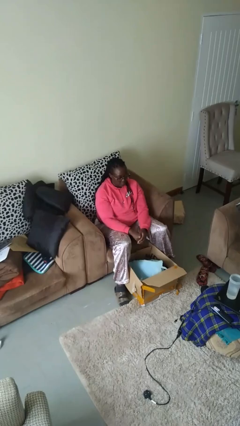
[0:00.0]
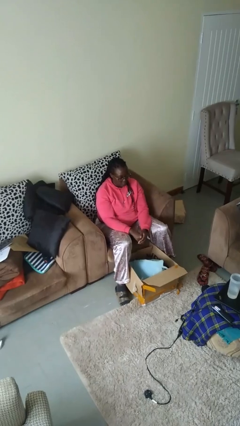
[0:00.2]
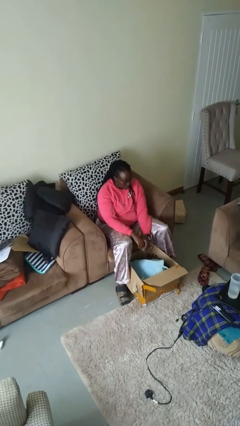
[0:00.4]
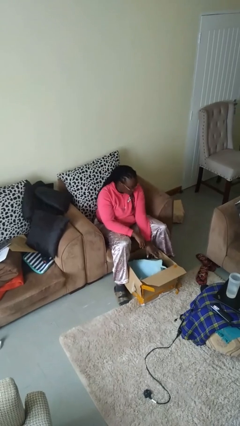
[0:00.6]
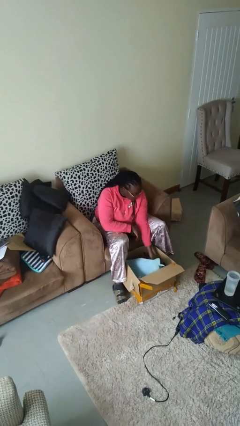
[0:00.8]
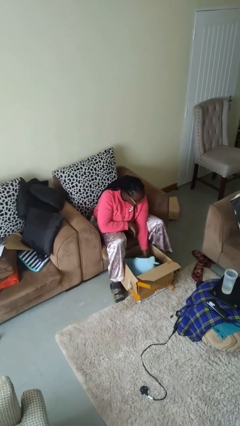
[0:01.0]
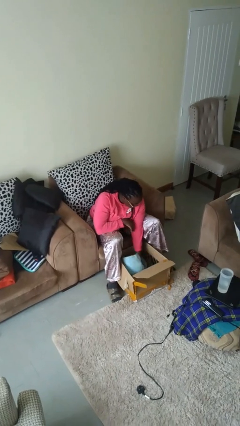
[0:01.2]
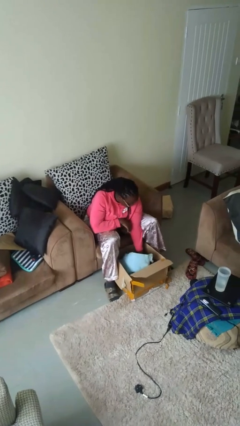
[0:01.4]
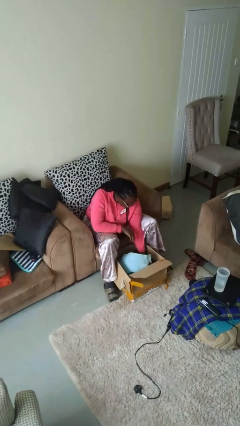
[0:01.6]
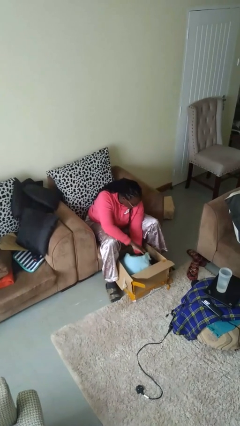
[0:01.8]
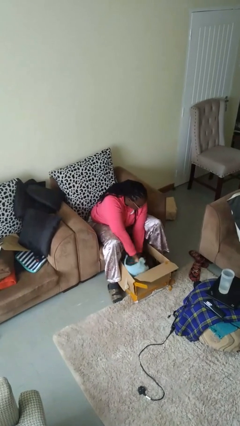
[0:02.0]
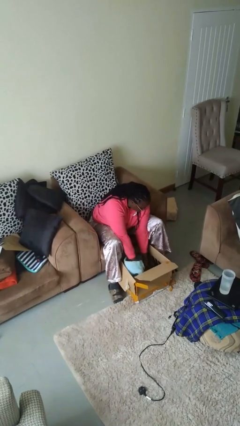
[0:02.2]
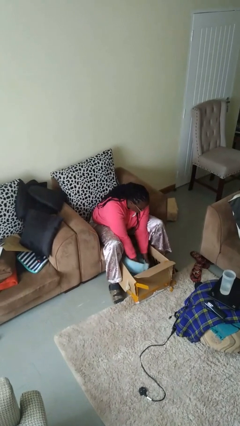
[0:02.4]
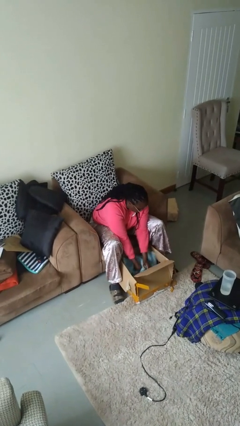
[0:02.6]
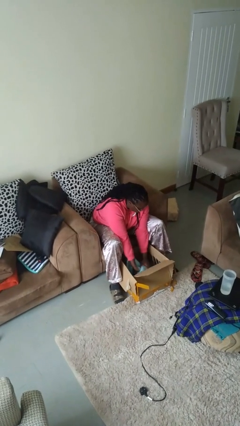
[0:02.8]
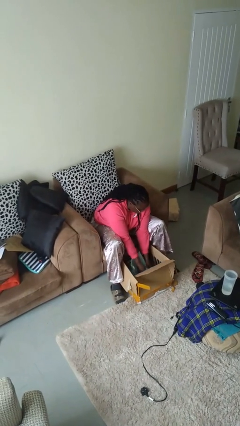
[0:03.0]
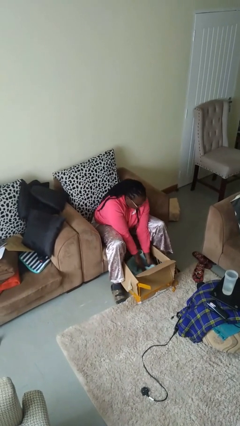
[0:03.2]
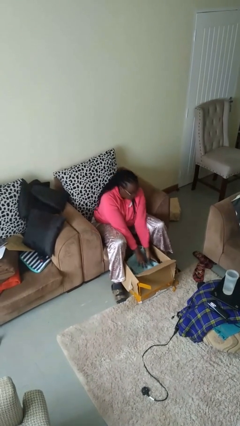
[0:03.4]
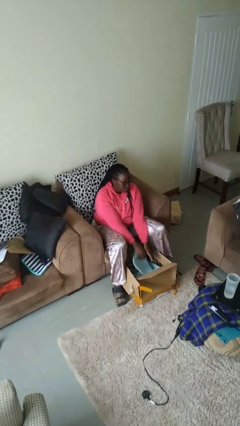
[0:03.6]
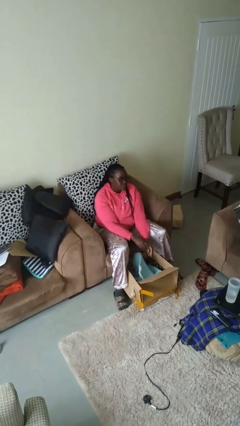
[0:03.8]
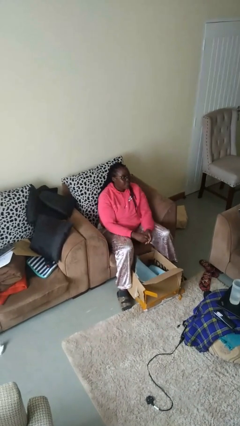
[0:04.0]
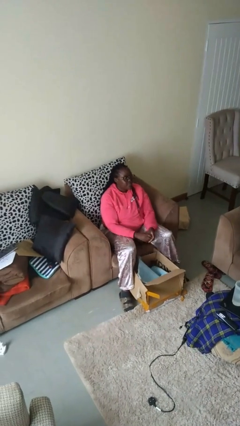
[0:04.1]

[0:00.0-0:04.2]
person searches in box

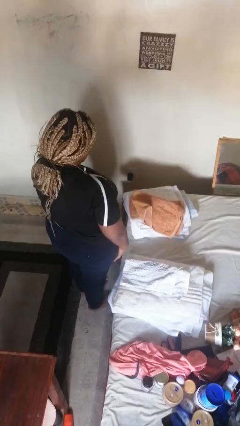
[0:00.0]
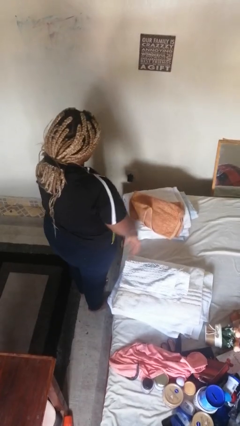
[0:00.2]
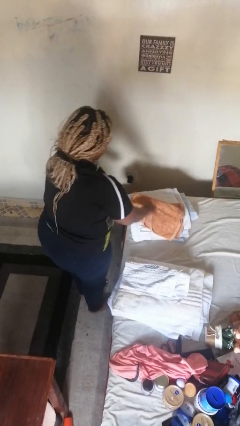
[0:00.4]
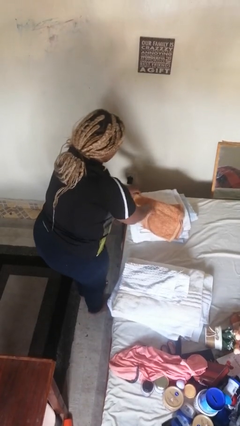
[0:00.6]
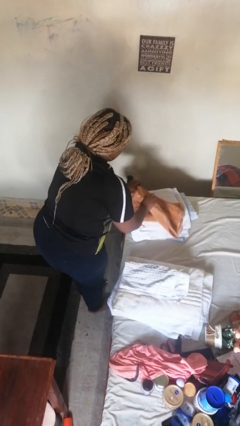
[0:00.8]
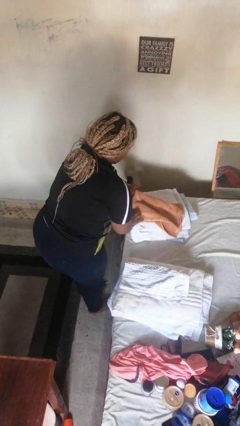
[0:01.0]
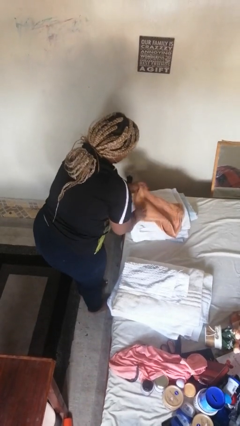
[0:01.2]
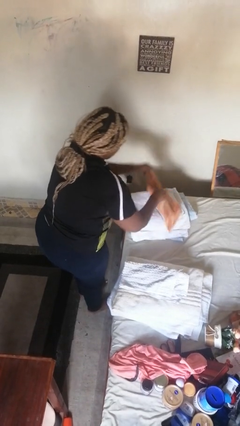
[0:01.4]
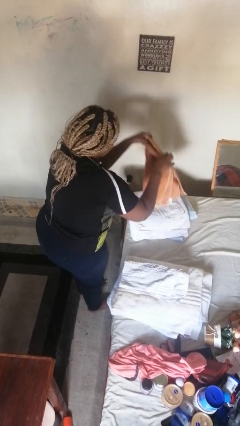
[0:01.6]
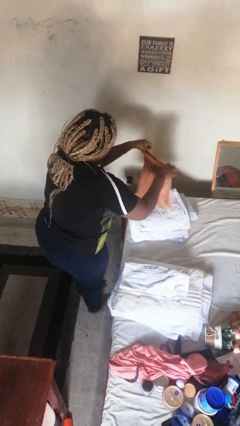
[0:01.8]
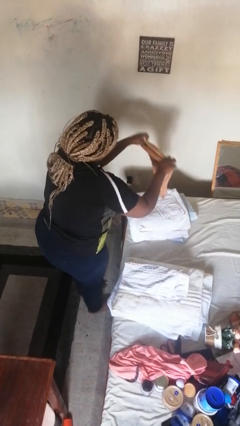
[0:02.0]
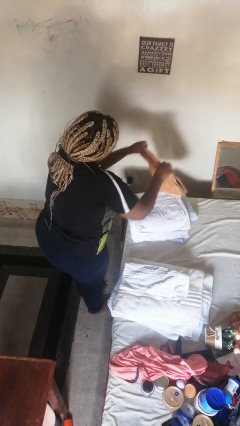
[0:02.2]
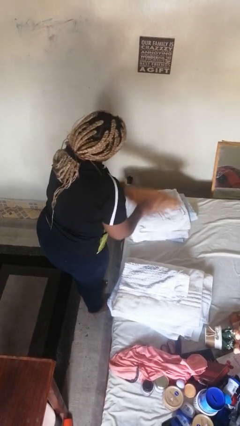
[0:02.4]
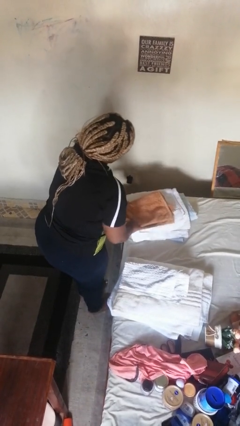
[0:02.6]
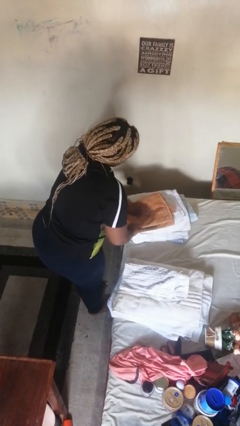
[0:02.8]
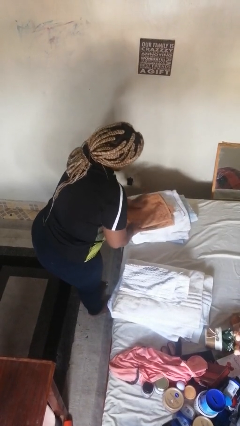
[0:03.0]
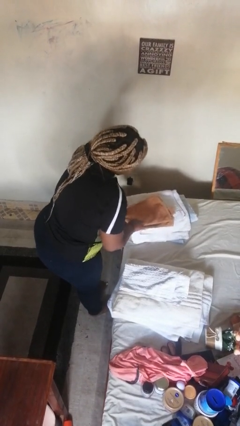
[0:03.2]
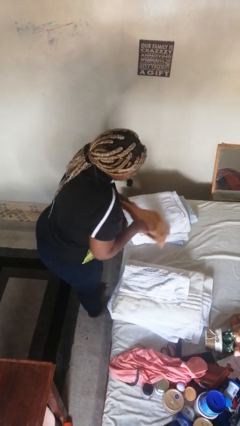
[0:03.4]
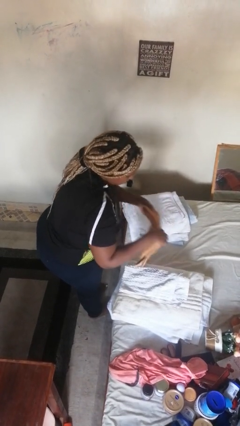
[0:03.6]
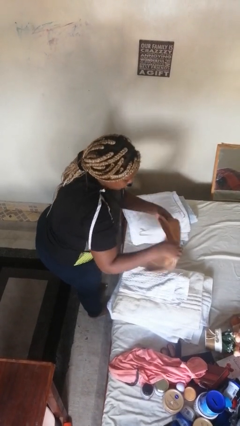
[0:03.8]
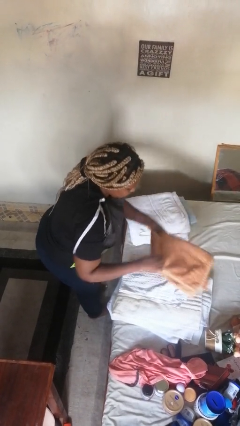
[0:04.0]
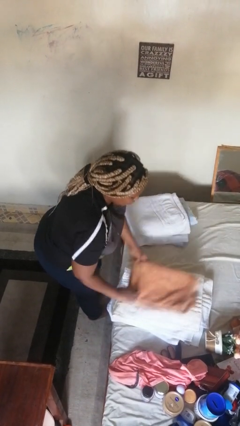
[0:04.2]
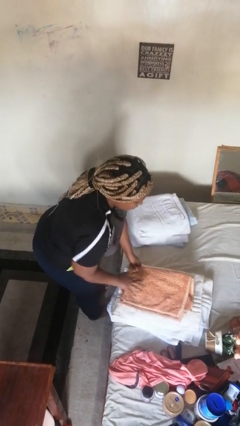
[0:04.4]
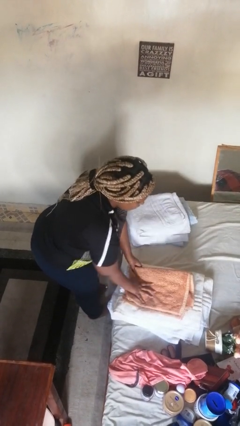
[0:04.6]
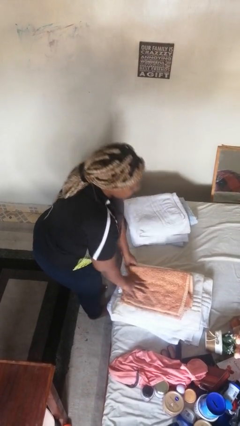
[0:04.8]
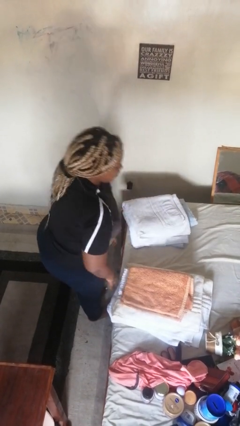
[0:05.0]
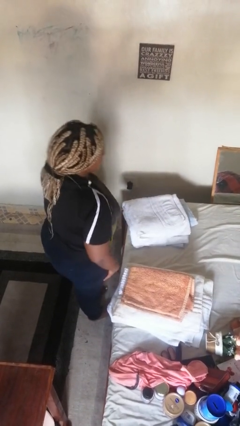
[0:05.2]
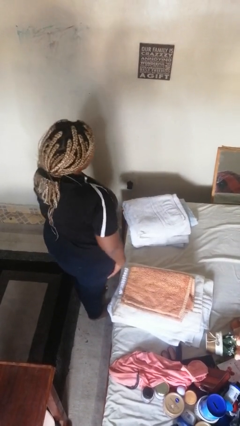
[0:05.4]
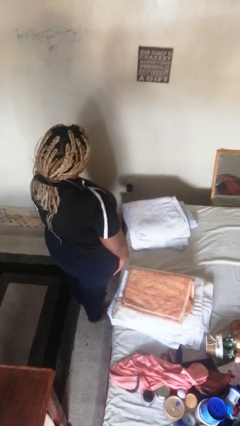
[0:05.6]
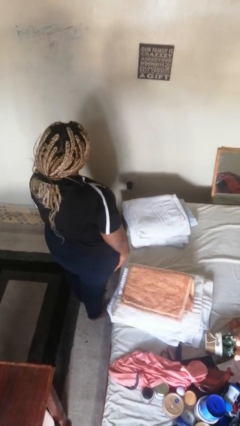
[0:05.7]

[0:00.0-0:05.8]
person folds towel

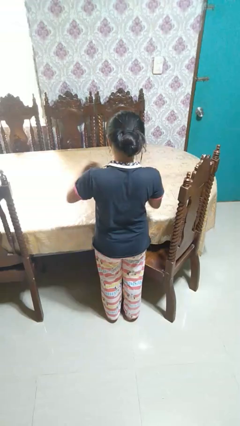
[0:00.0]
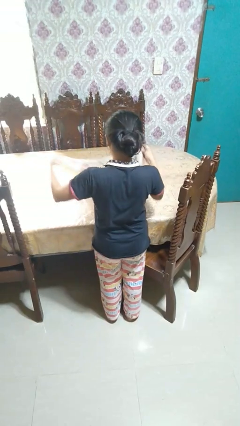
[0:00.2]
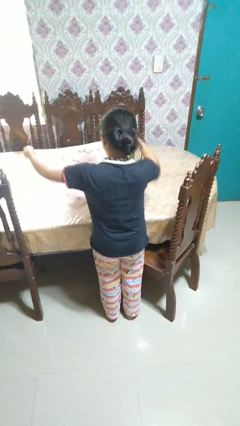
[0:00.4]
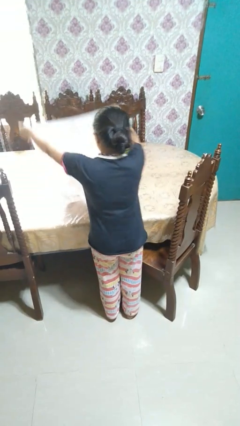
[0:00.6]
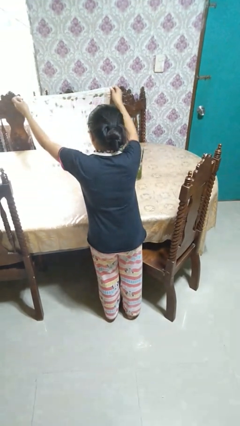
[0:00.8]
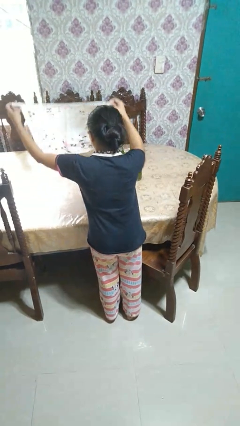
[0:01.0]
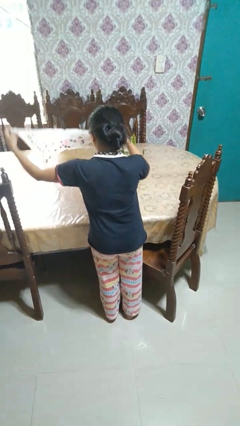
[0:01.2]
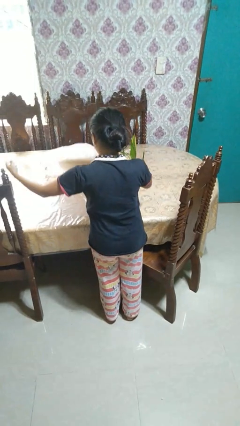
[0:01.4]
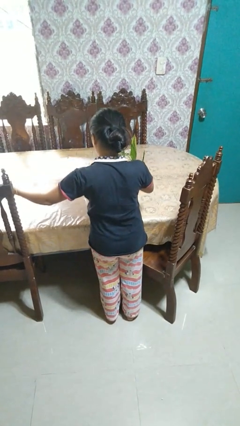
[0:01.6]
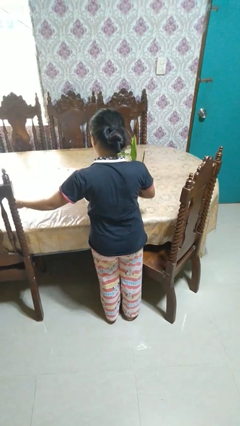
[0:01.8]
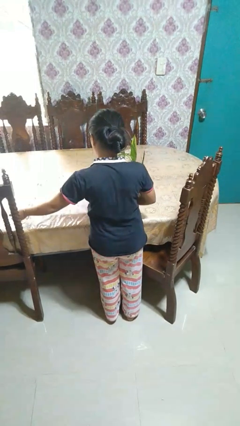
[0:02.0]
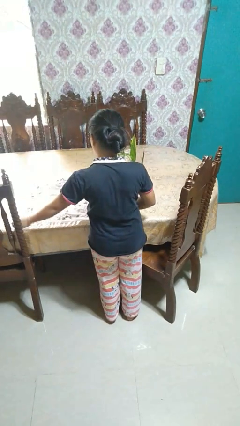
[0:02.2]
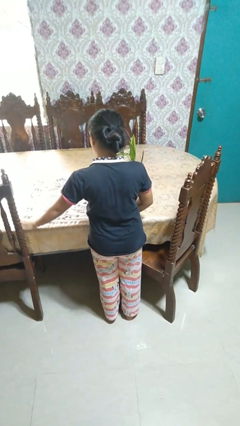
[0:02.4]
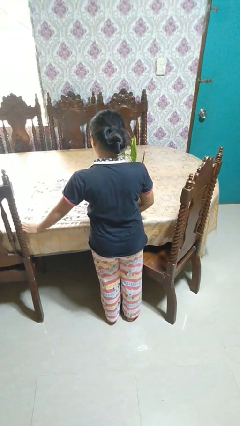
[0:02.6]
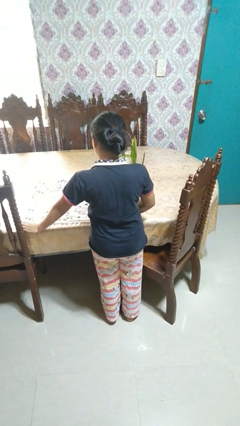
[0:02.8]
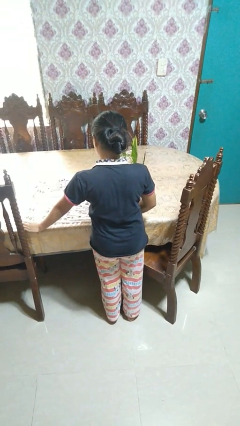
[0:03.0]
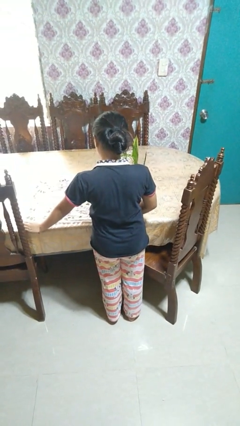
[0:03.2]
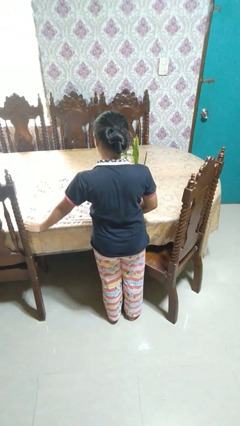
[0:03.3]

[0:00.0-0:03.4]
person spreads tablecloth

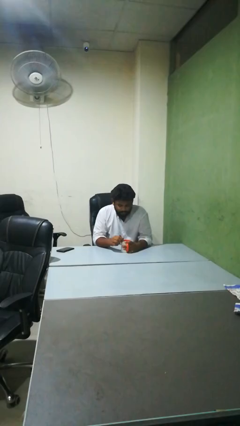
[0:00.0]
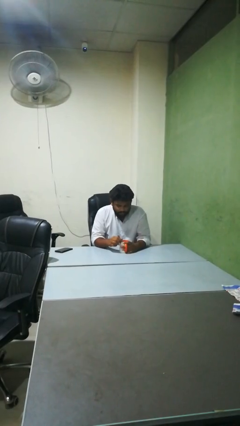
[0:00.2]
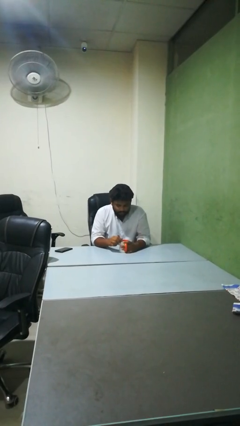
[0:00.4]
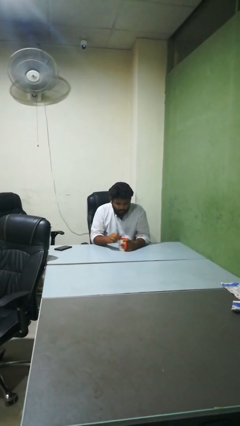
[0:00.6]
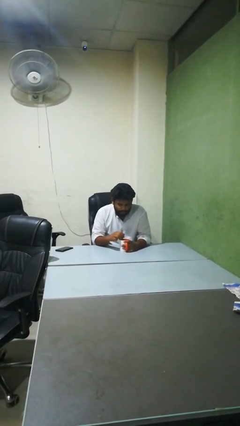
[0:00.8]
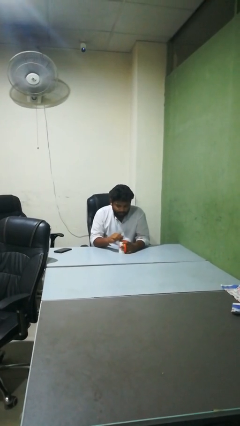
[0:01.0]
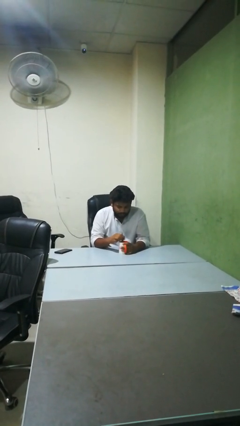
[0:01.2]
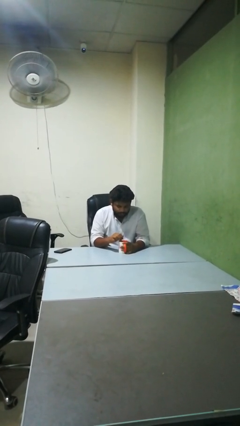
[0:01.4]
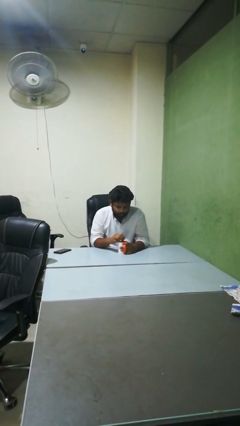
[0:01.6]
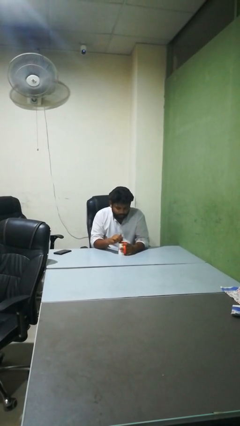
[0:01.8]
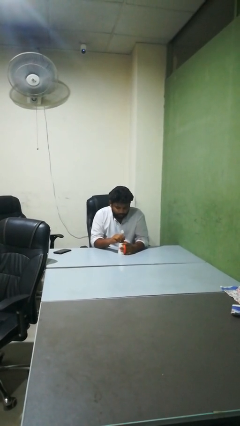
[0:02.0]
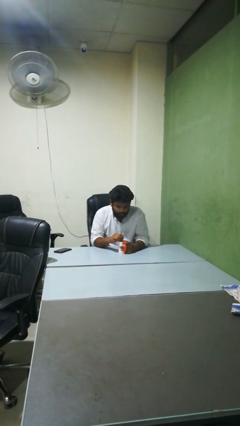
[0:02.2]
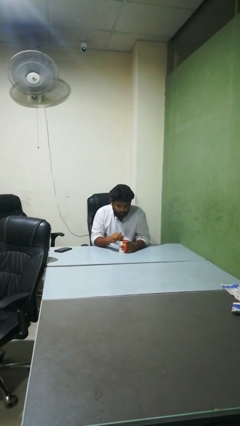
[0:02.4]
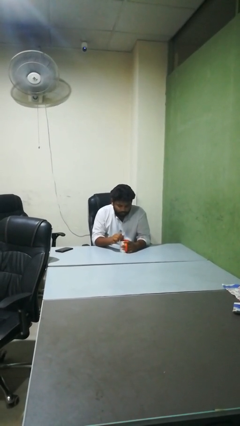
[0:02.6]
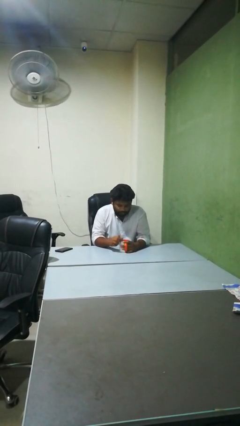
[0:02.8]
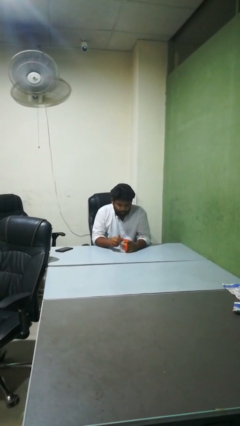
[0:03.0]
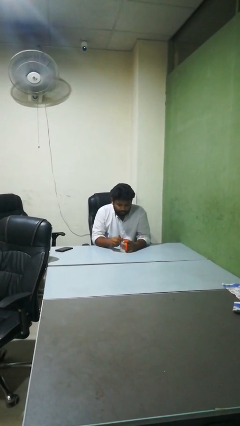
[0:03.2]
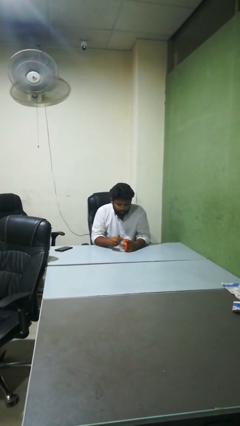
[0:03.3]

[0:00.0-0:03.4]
person stirs mug

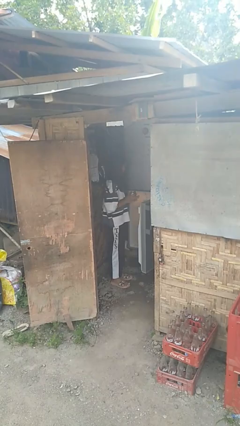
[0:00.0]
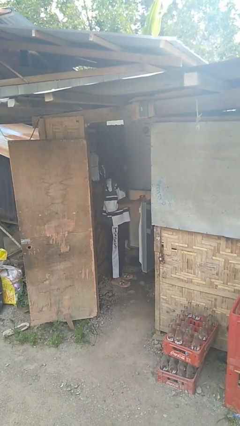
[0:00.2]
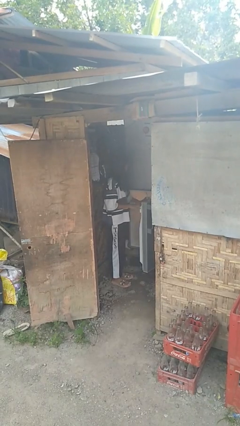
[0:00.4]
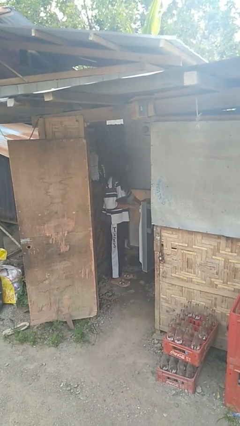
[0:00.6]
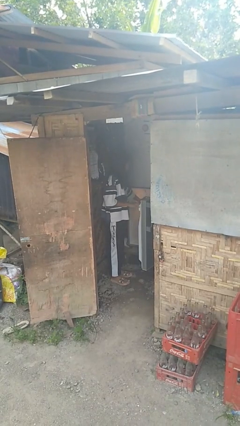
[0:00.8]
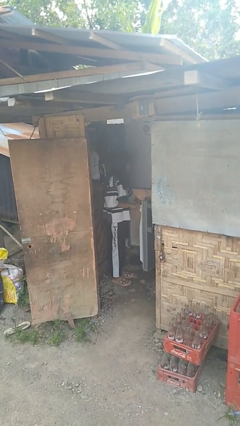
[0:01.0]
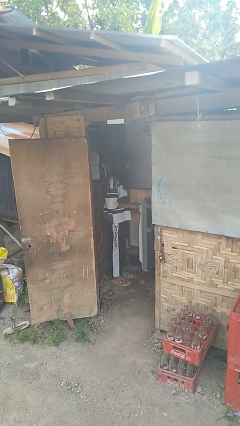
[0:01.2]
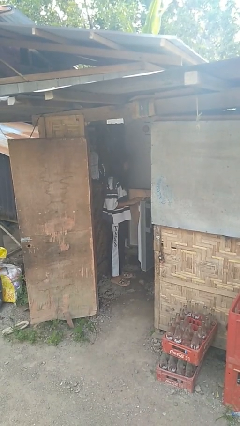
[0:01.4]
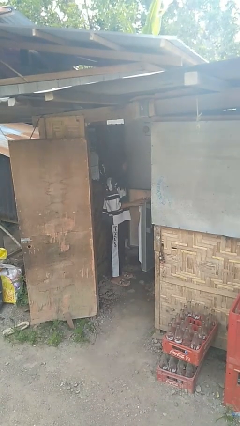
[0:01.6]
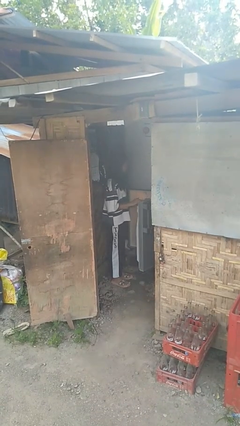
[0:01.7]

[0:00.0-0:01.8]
person puts object into refrigerator
